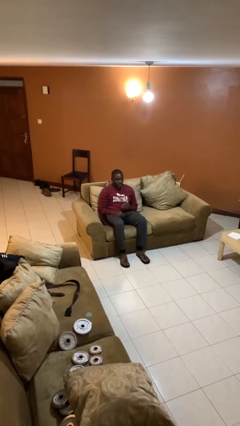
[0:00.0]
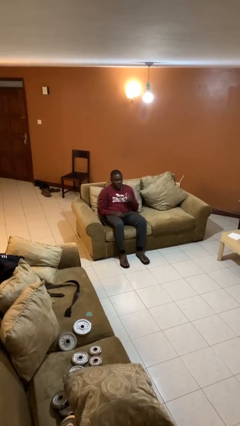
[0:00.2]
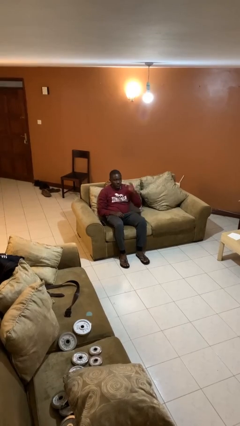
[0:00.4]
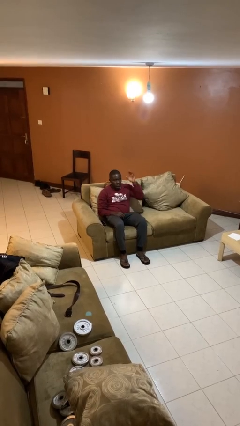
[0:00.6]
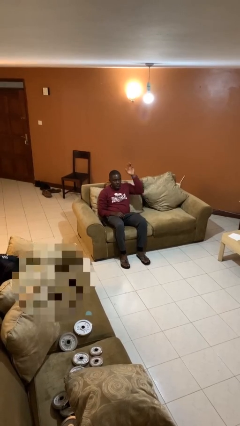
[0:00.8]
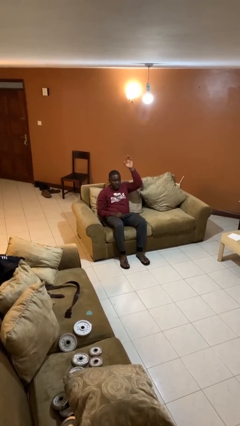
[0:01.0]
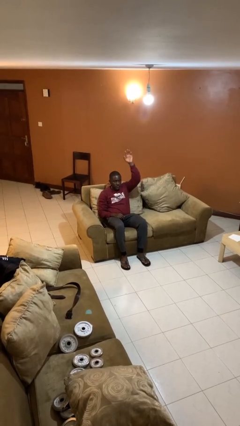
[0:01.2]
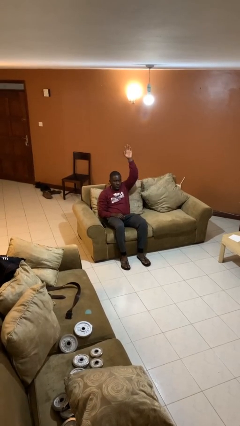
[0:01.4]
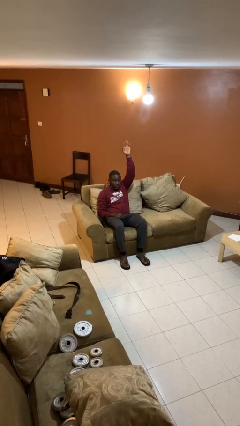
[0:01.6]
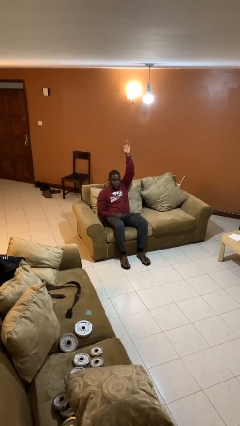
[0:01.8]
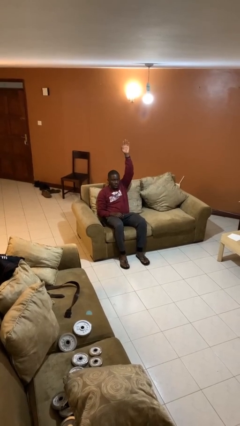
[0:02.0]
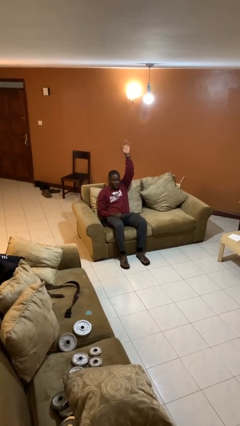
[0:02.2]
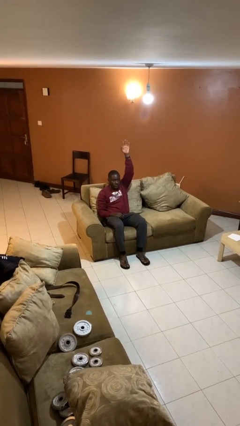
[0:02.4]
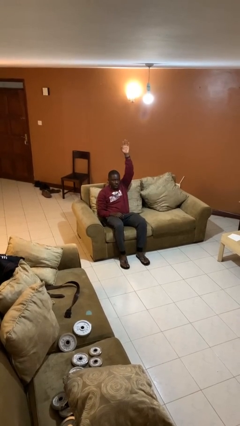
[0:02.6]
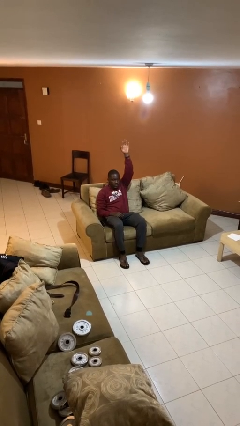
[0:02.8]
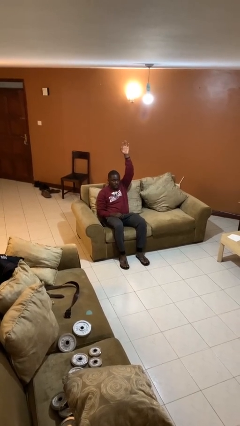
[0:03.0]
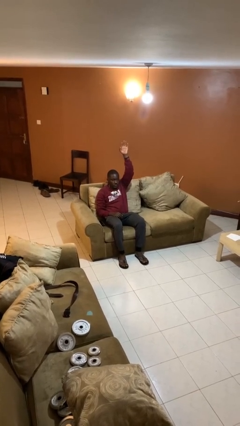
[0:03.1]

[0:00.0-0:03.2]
person gestures raise hand

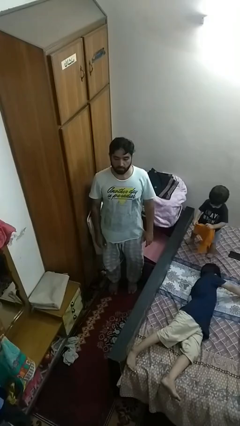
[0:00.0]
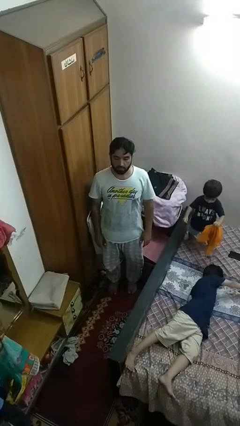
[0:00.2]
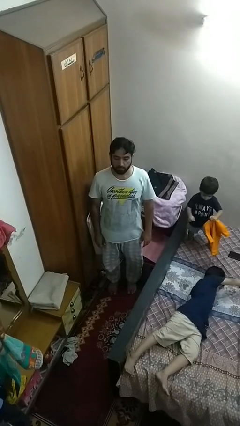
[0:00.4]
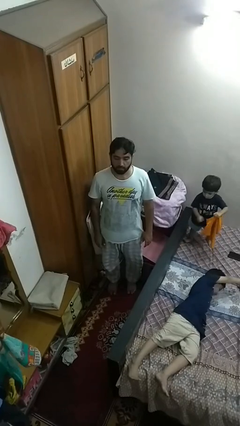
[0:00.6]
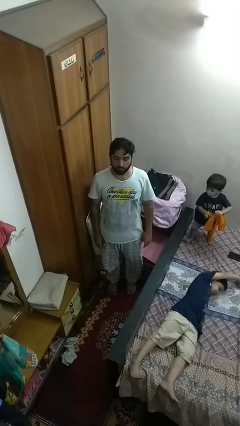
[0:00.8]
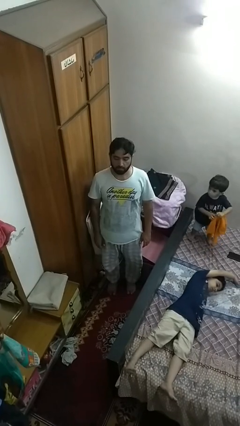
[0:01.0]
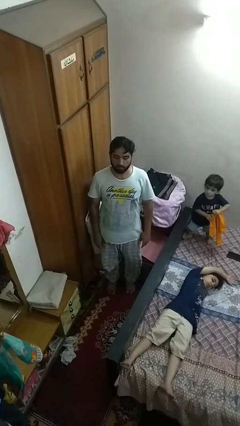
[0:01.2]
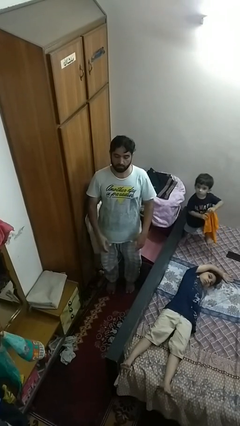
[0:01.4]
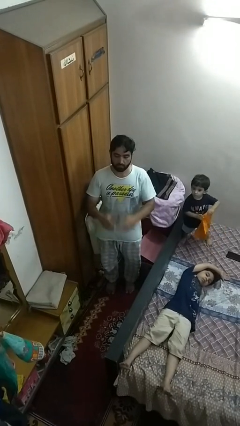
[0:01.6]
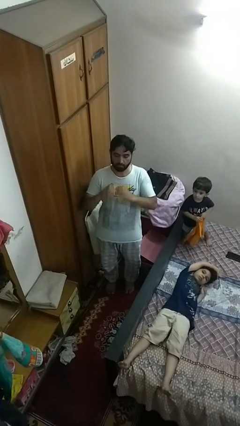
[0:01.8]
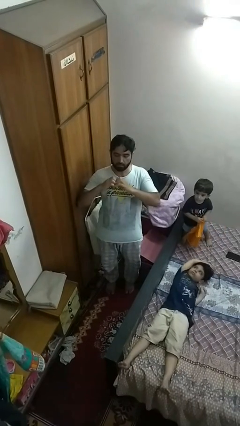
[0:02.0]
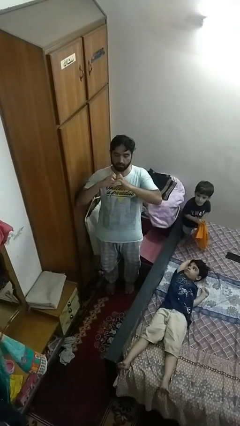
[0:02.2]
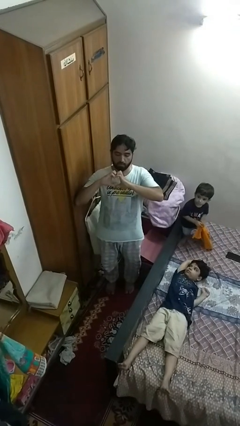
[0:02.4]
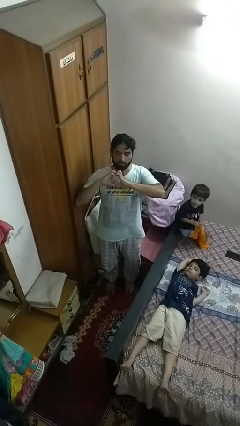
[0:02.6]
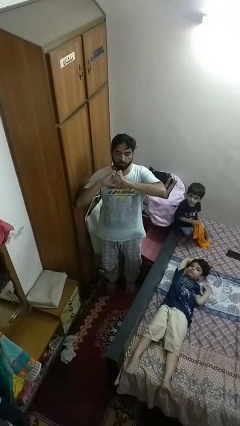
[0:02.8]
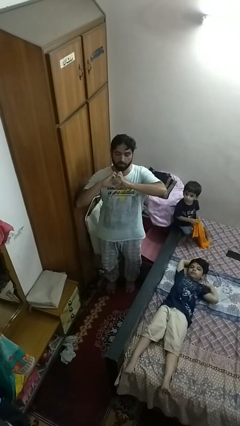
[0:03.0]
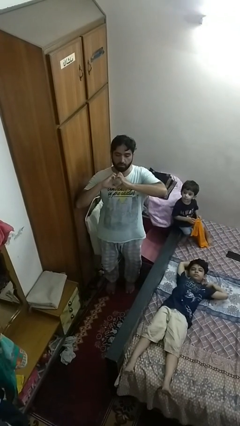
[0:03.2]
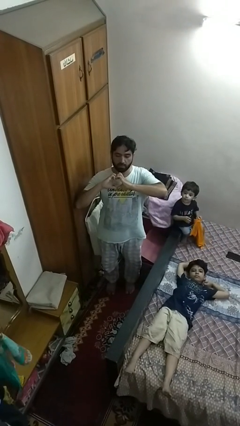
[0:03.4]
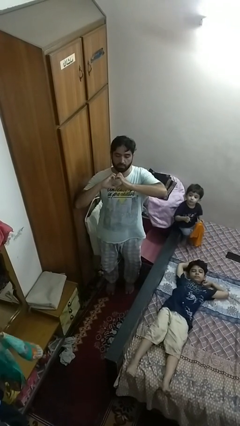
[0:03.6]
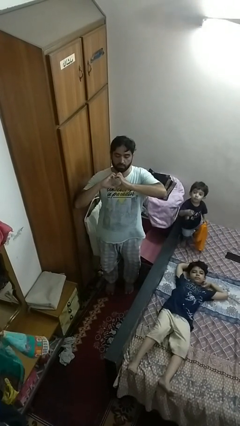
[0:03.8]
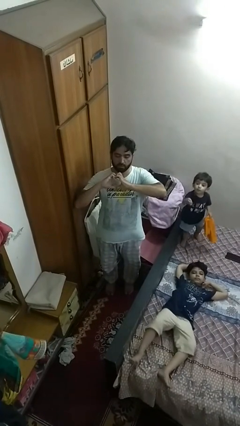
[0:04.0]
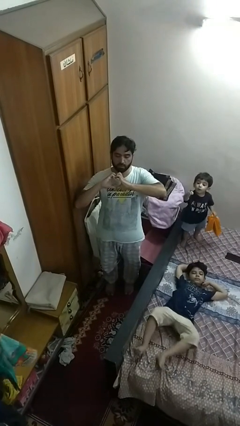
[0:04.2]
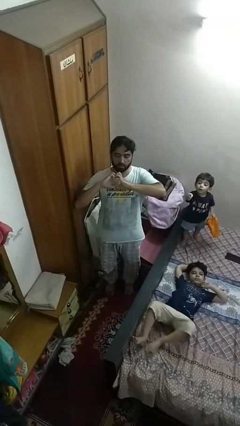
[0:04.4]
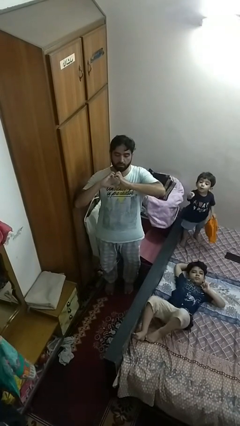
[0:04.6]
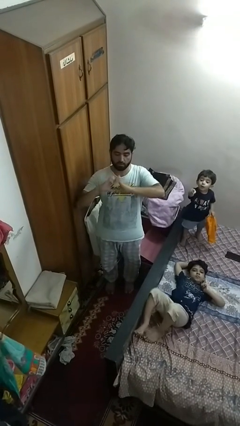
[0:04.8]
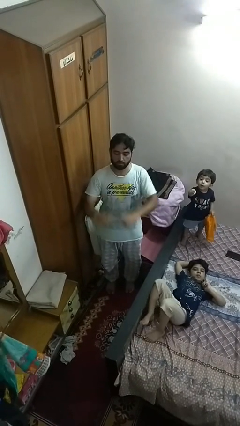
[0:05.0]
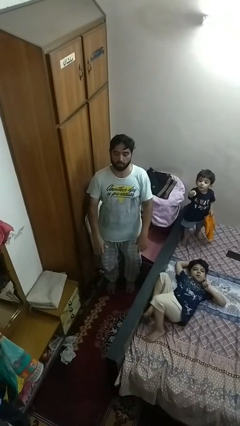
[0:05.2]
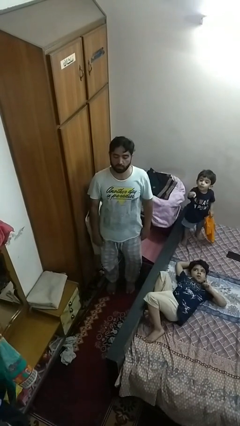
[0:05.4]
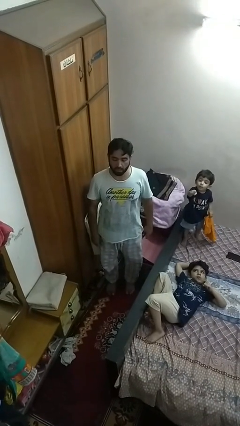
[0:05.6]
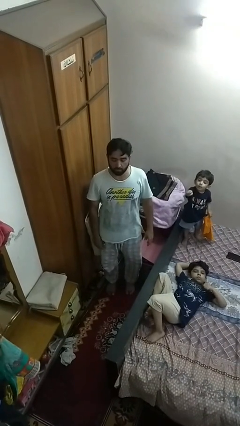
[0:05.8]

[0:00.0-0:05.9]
person gestures heart

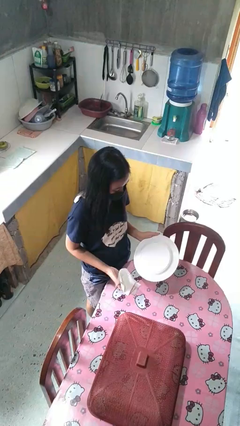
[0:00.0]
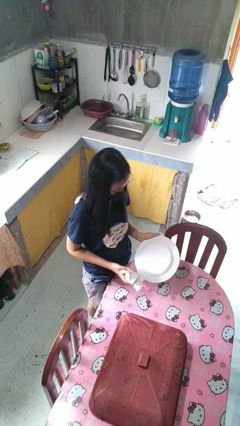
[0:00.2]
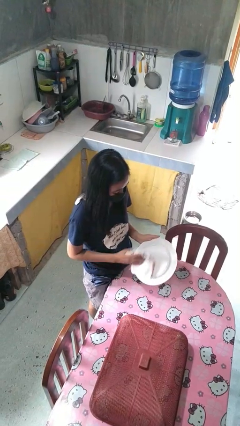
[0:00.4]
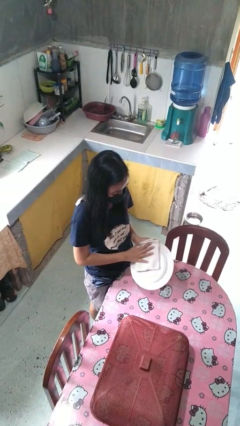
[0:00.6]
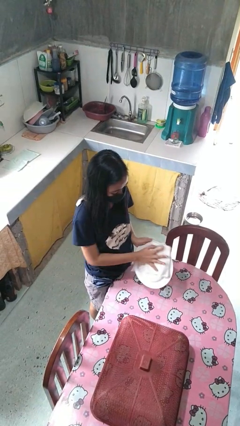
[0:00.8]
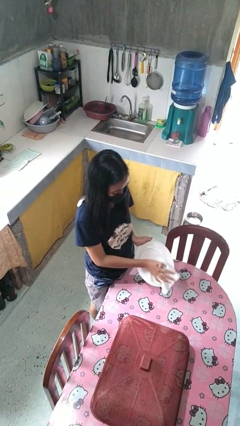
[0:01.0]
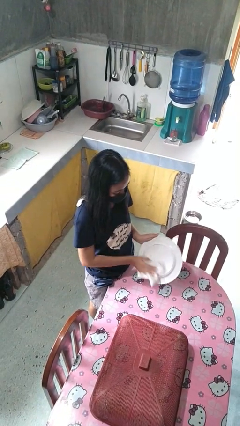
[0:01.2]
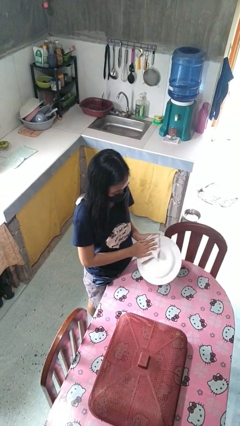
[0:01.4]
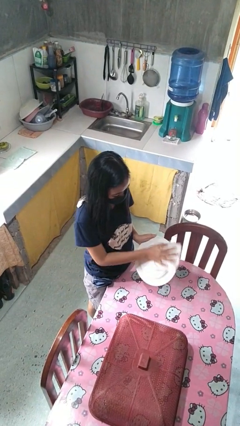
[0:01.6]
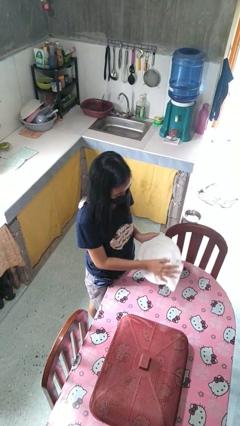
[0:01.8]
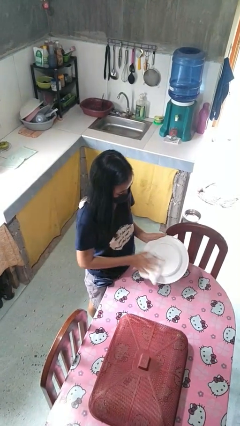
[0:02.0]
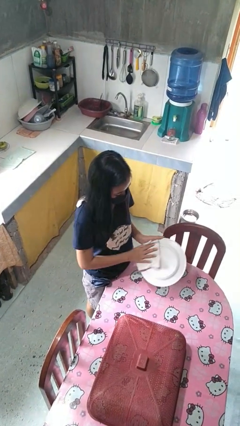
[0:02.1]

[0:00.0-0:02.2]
person dries dish

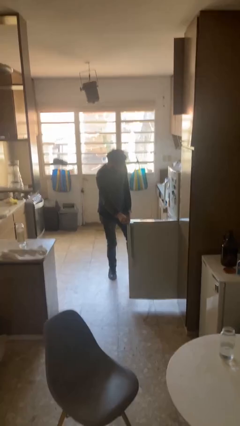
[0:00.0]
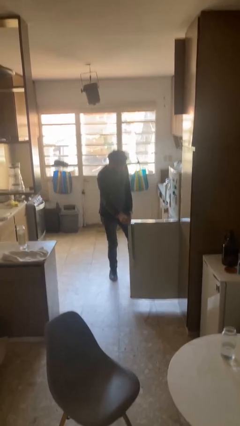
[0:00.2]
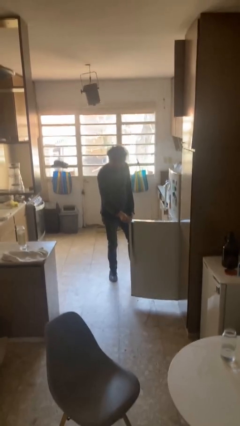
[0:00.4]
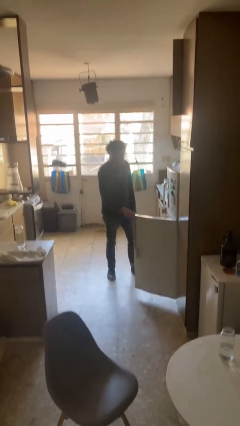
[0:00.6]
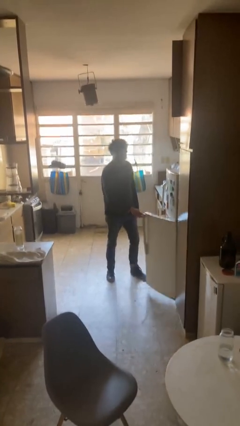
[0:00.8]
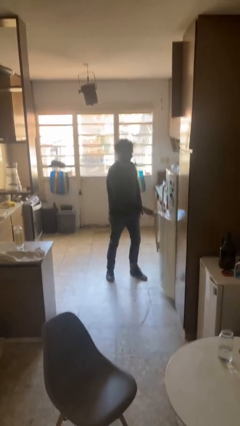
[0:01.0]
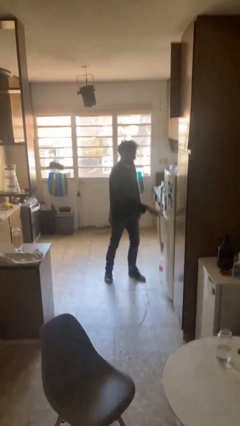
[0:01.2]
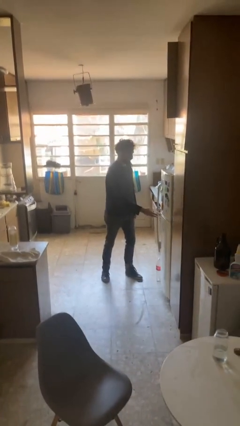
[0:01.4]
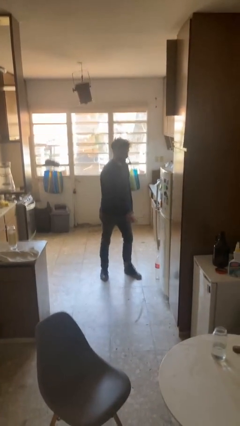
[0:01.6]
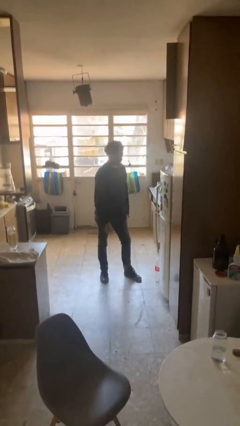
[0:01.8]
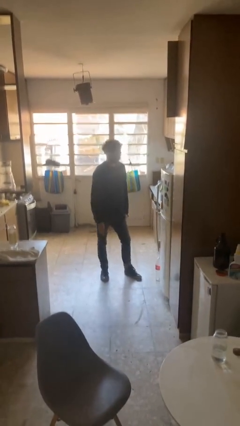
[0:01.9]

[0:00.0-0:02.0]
person closes refrigerator

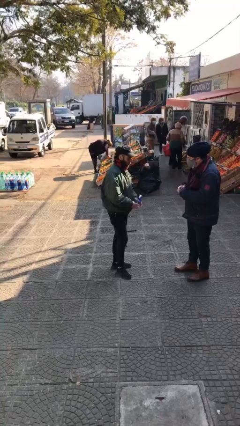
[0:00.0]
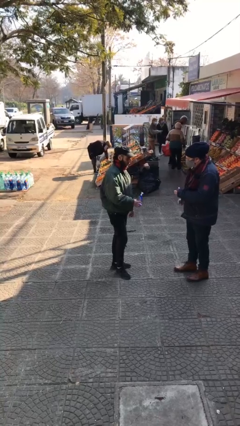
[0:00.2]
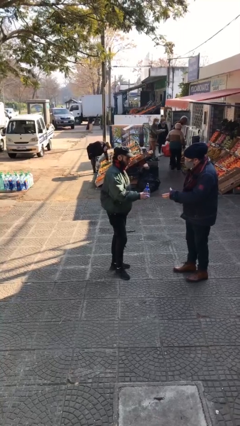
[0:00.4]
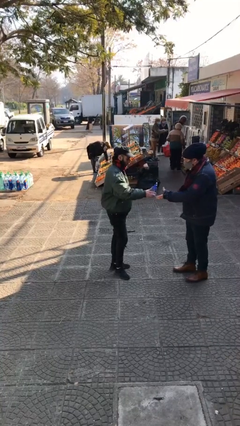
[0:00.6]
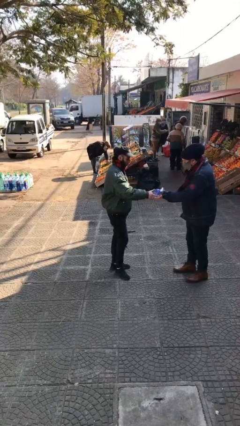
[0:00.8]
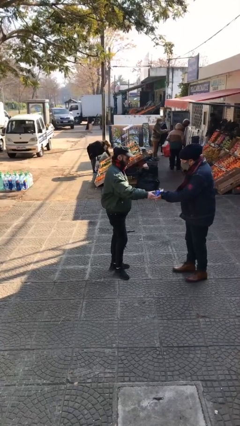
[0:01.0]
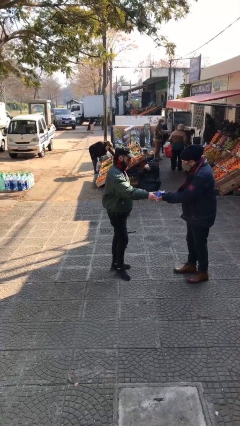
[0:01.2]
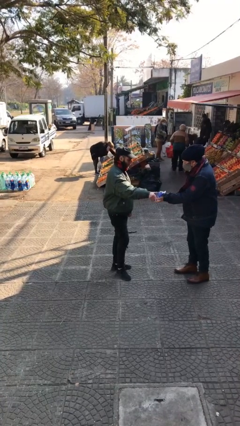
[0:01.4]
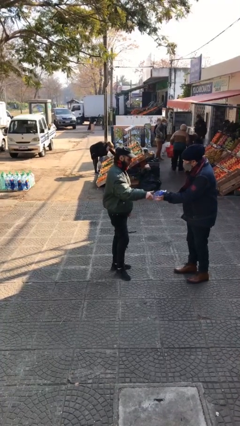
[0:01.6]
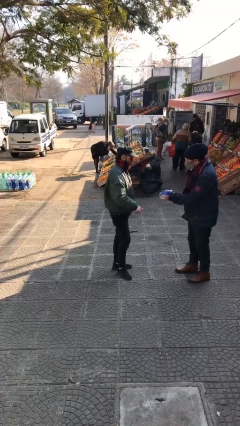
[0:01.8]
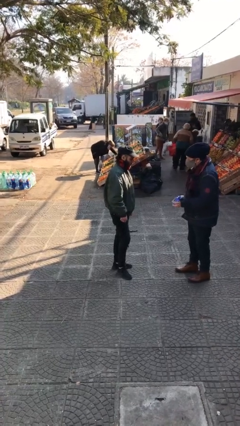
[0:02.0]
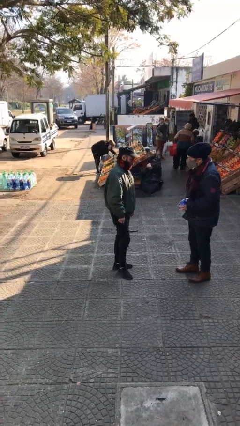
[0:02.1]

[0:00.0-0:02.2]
person transfers object to person

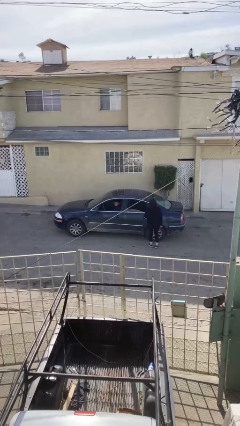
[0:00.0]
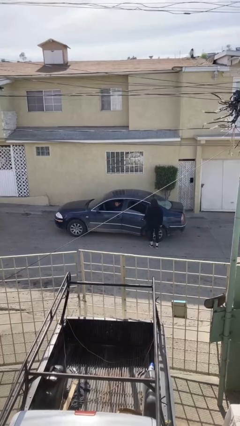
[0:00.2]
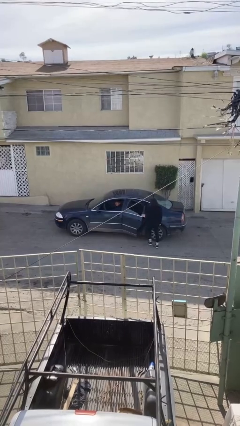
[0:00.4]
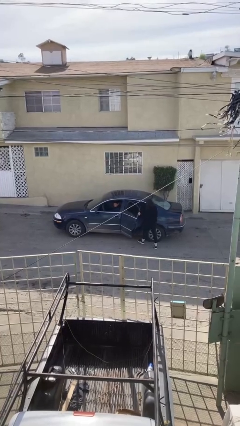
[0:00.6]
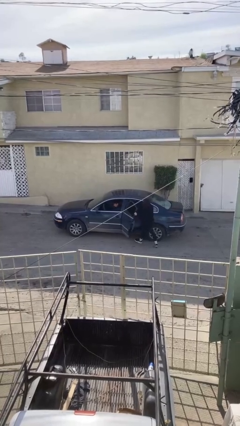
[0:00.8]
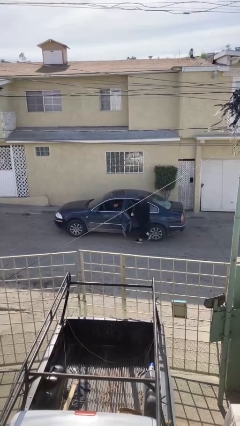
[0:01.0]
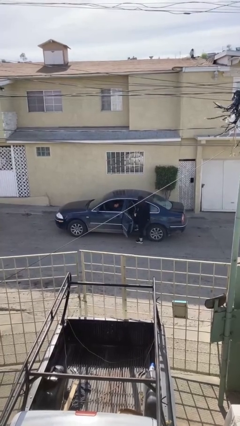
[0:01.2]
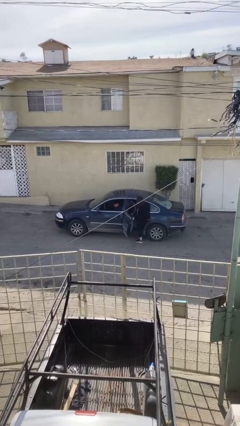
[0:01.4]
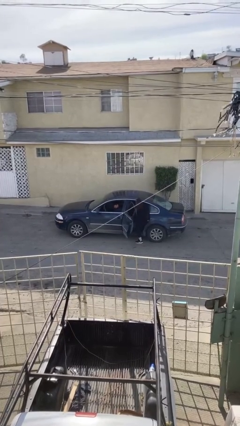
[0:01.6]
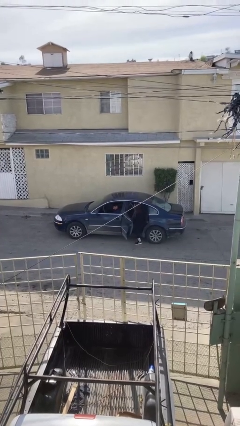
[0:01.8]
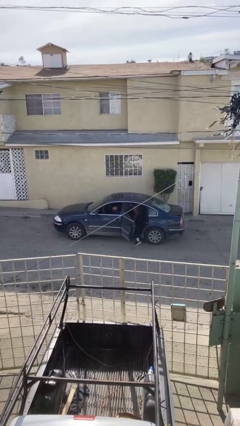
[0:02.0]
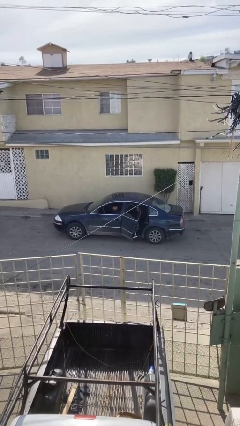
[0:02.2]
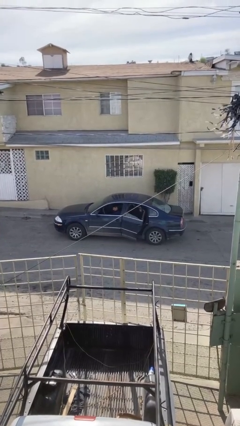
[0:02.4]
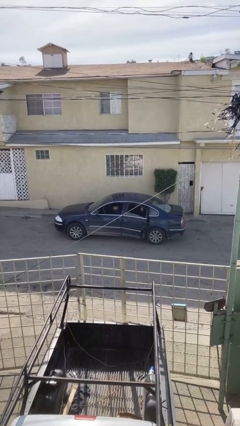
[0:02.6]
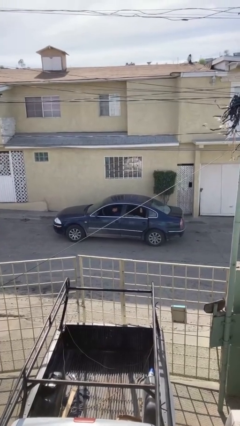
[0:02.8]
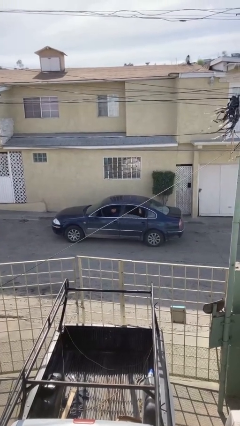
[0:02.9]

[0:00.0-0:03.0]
car picks up person
